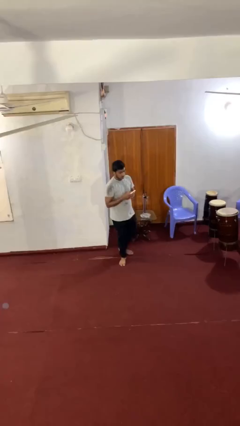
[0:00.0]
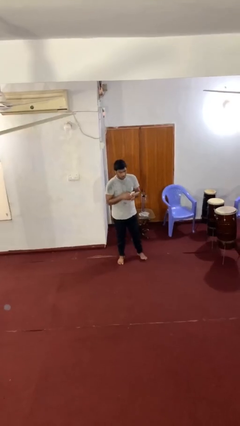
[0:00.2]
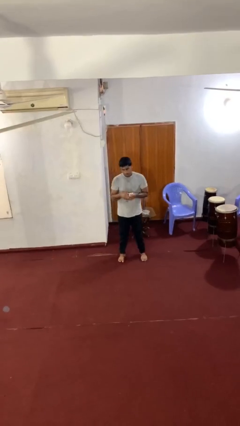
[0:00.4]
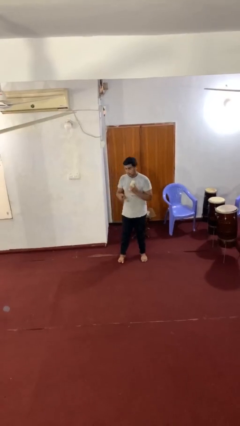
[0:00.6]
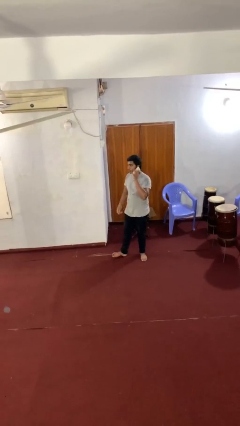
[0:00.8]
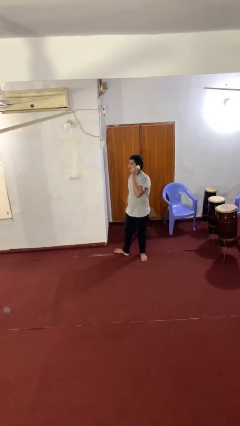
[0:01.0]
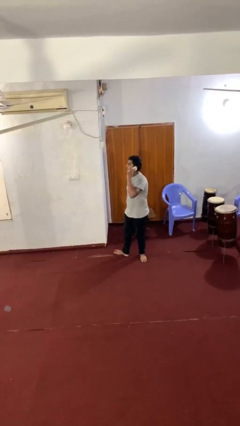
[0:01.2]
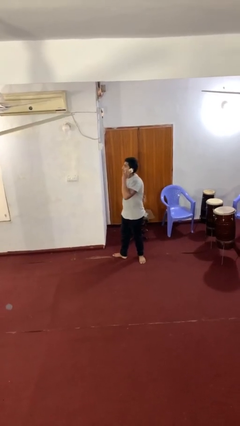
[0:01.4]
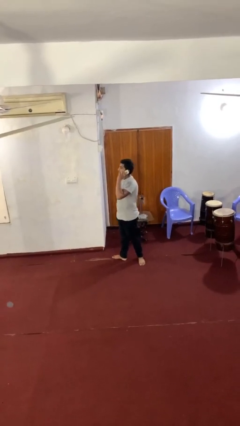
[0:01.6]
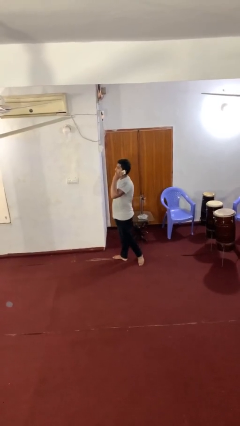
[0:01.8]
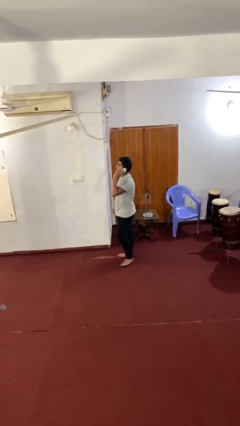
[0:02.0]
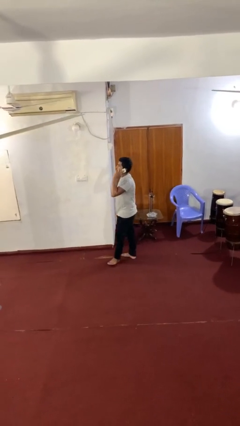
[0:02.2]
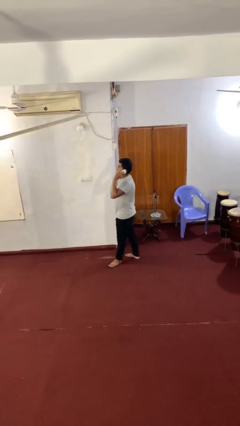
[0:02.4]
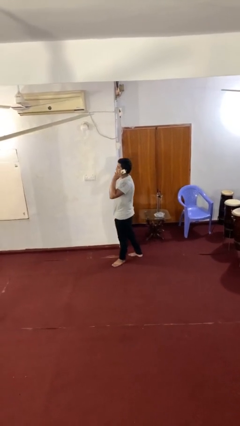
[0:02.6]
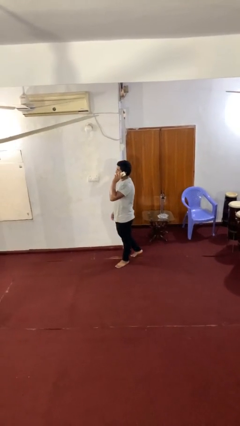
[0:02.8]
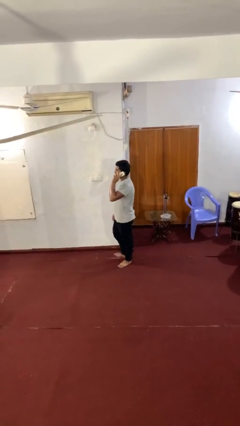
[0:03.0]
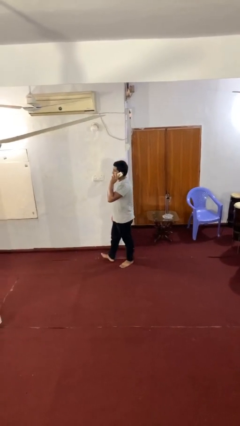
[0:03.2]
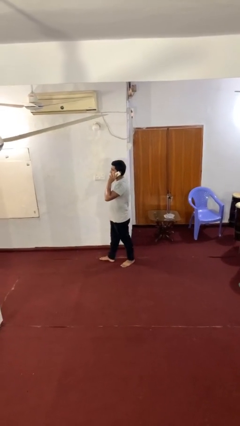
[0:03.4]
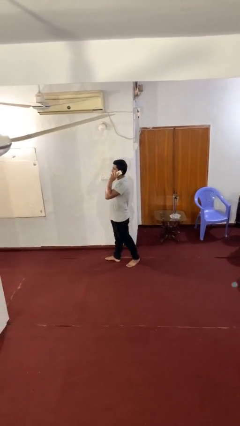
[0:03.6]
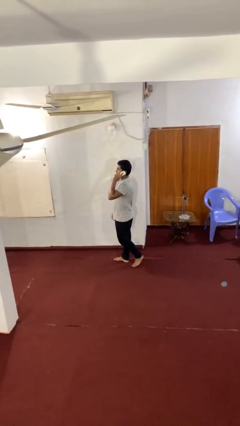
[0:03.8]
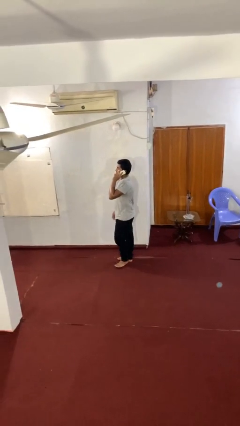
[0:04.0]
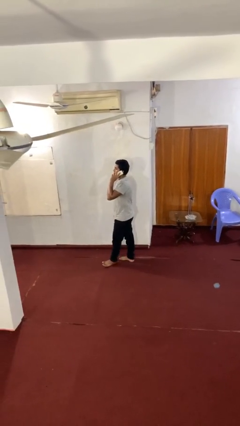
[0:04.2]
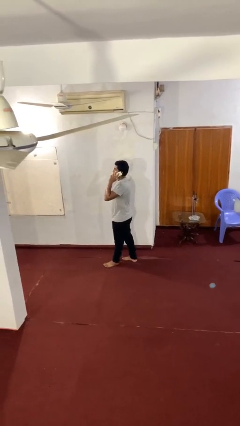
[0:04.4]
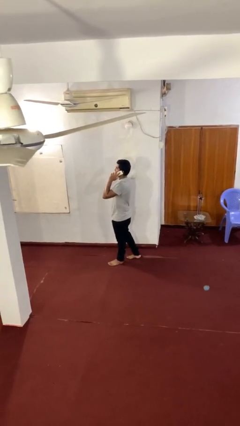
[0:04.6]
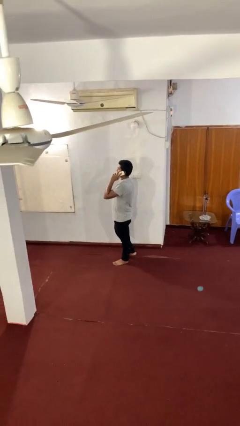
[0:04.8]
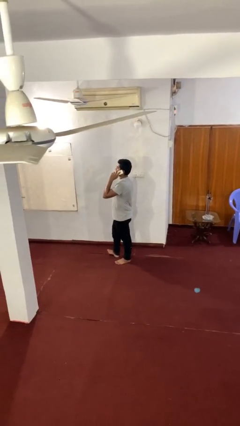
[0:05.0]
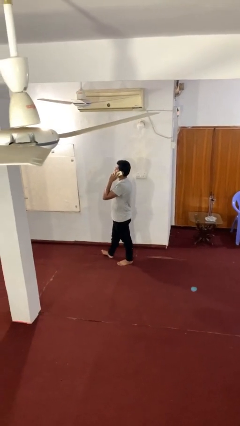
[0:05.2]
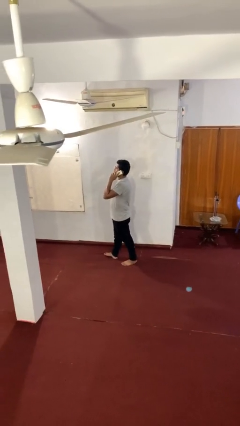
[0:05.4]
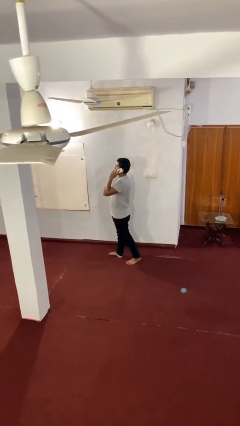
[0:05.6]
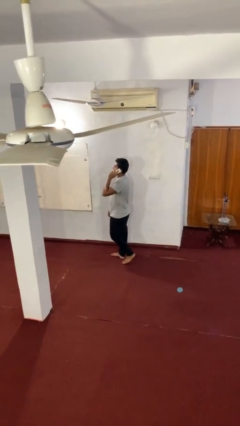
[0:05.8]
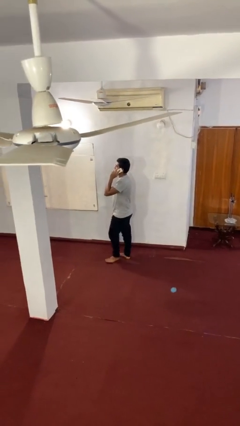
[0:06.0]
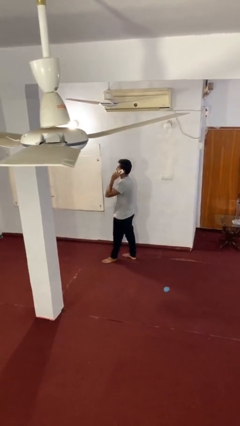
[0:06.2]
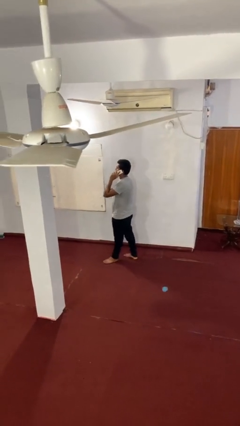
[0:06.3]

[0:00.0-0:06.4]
person talks on phone

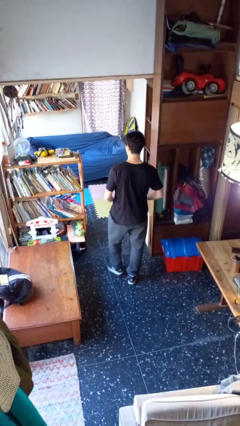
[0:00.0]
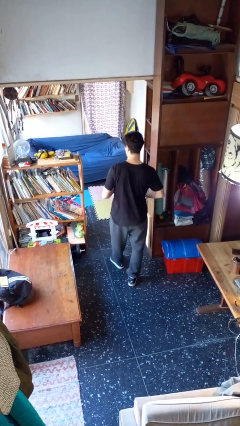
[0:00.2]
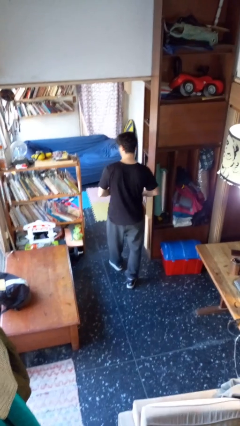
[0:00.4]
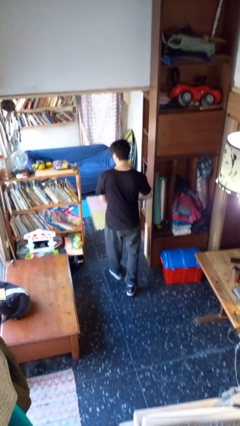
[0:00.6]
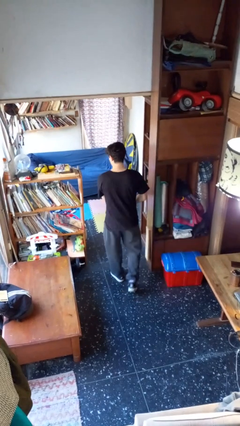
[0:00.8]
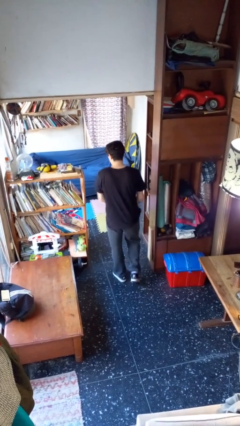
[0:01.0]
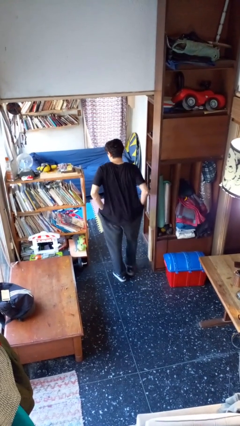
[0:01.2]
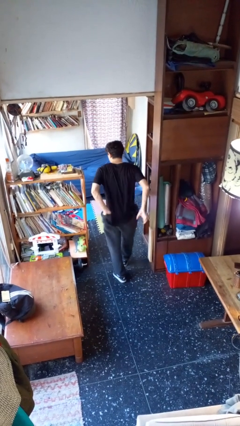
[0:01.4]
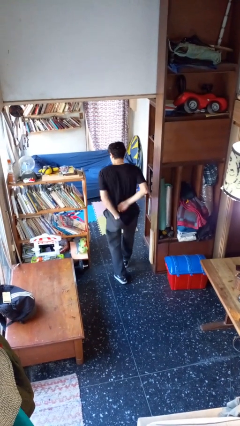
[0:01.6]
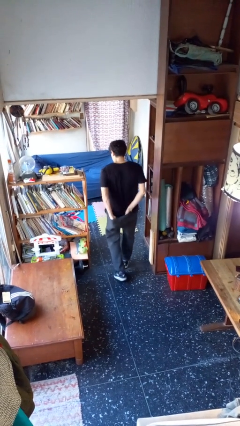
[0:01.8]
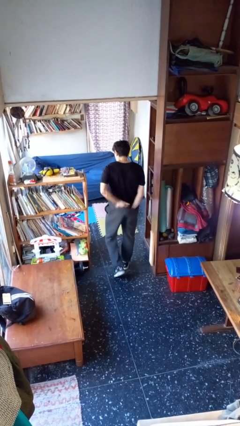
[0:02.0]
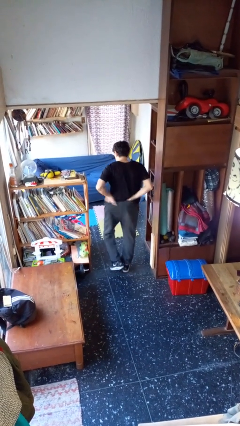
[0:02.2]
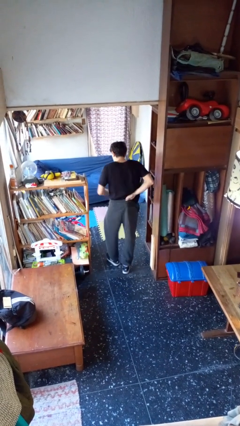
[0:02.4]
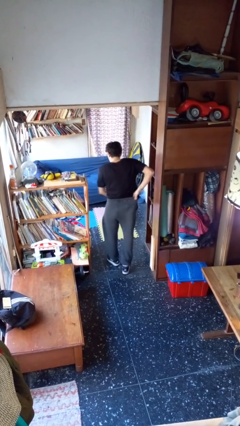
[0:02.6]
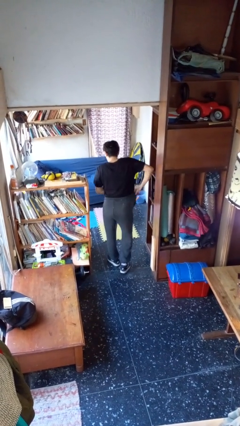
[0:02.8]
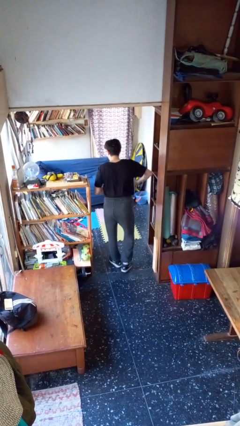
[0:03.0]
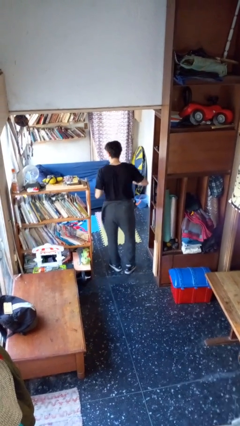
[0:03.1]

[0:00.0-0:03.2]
person tucks in shirt

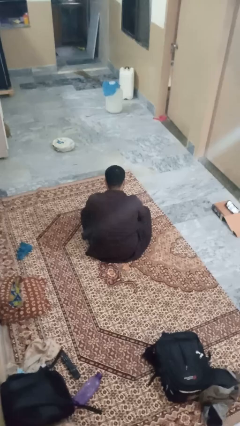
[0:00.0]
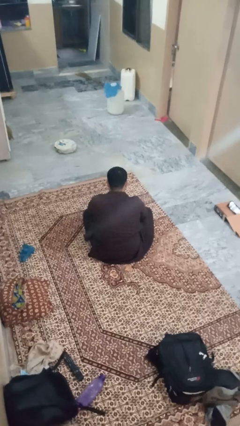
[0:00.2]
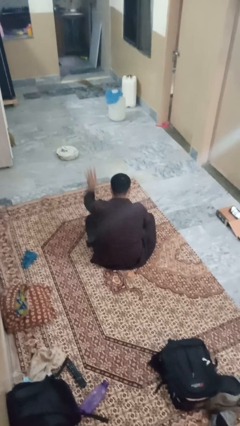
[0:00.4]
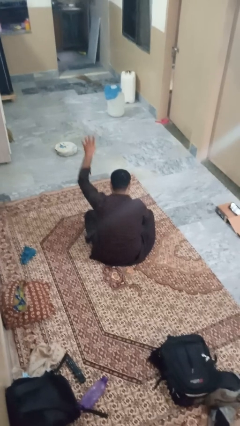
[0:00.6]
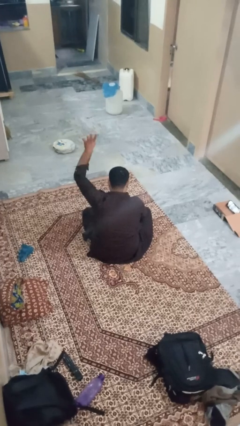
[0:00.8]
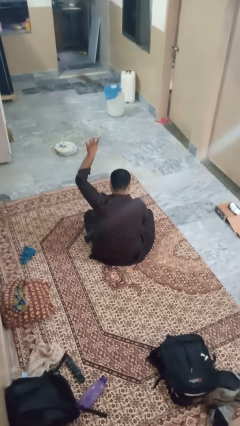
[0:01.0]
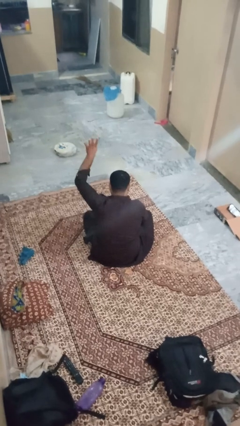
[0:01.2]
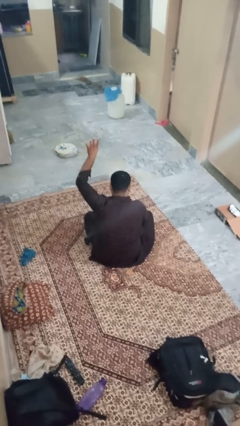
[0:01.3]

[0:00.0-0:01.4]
person gestures number four

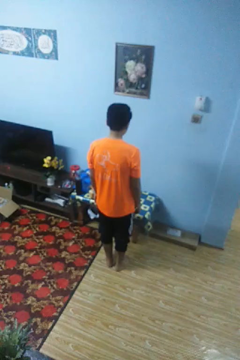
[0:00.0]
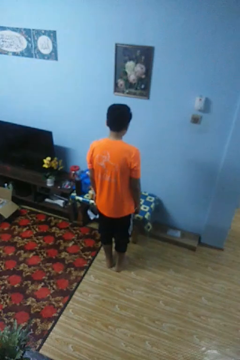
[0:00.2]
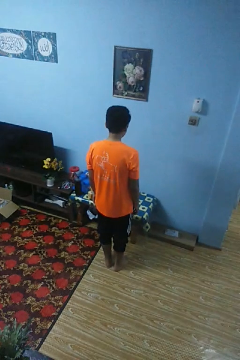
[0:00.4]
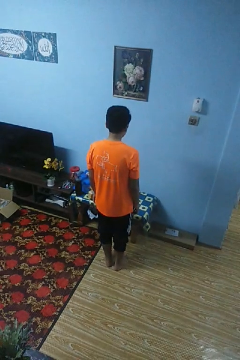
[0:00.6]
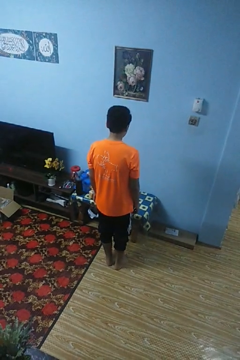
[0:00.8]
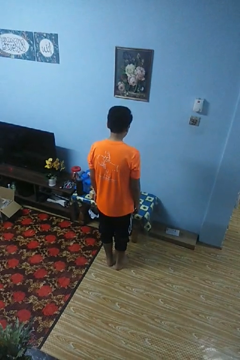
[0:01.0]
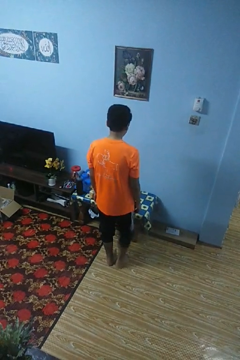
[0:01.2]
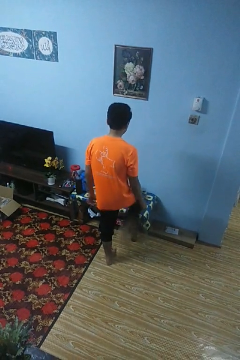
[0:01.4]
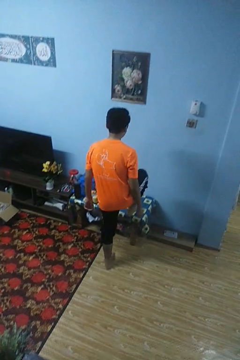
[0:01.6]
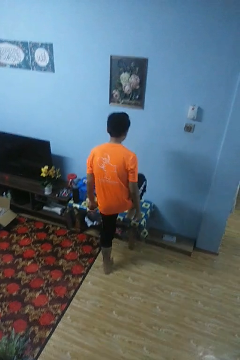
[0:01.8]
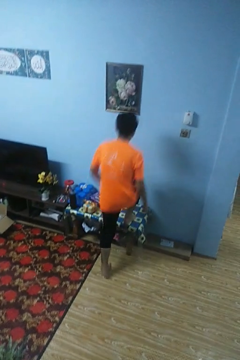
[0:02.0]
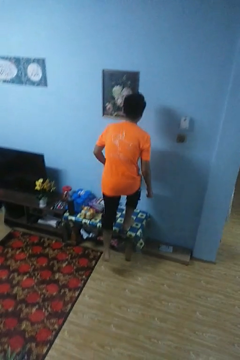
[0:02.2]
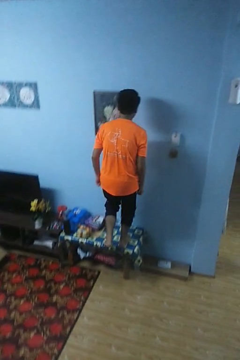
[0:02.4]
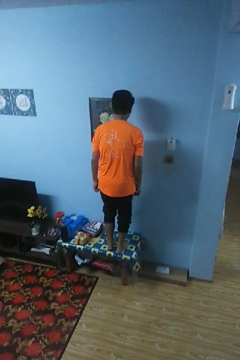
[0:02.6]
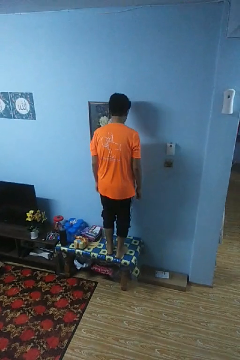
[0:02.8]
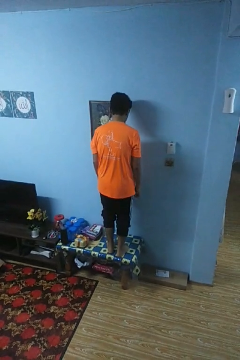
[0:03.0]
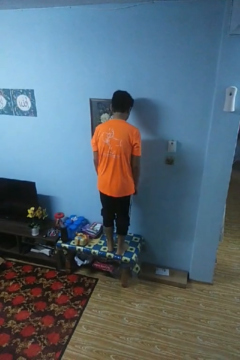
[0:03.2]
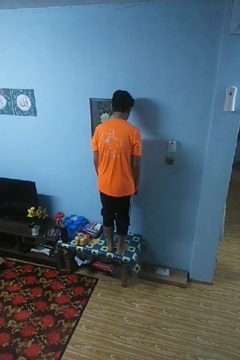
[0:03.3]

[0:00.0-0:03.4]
person climbs on table

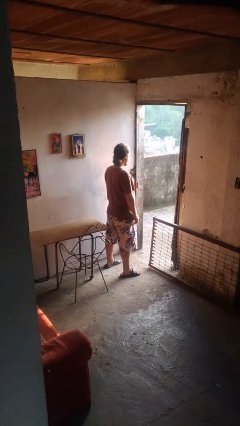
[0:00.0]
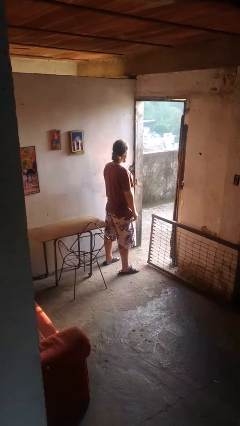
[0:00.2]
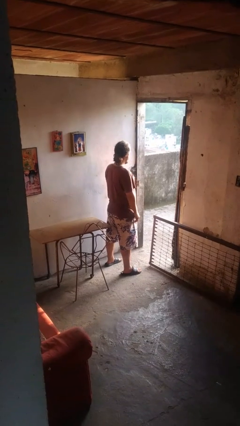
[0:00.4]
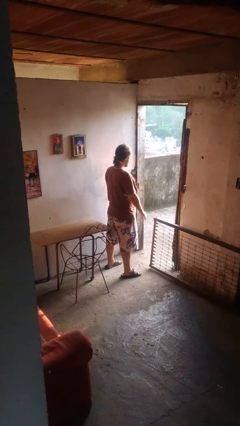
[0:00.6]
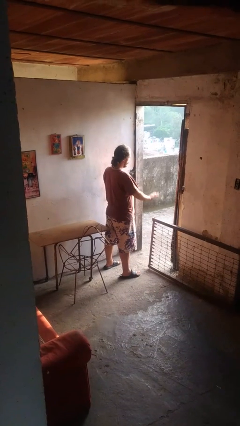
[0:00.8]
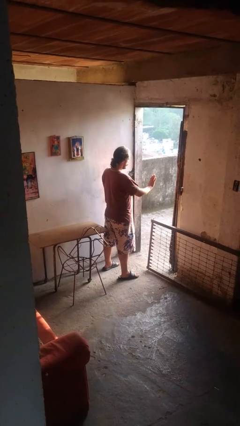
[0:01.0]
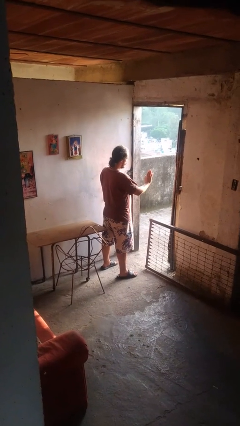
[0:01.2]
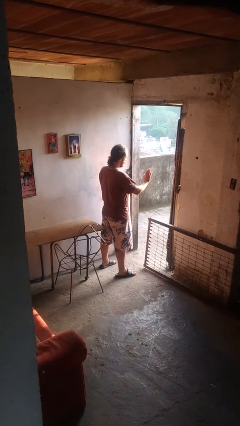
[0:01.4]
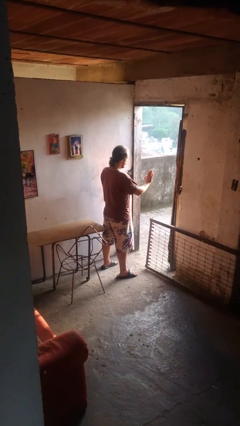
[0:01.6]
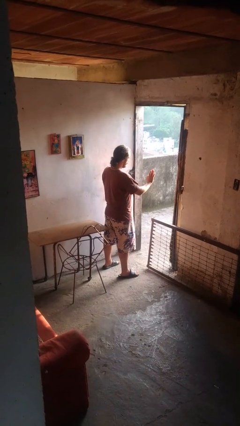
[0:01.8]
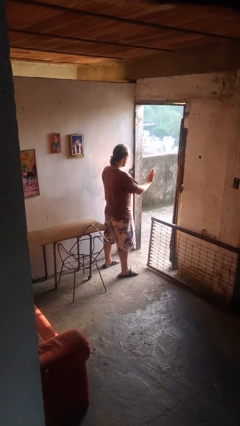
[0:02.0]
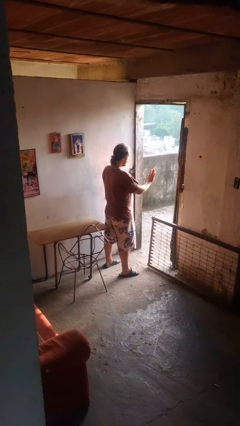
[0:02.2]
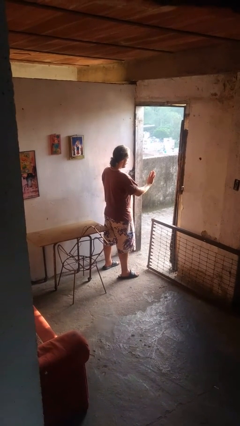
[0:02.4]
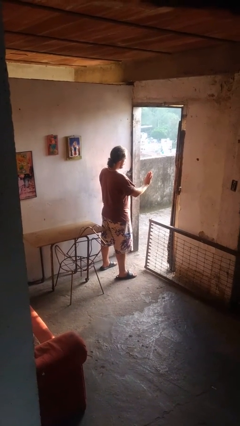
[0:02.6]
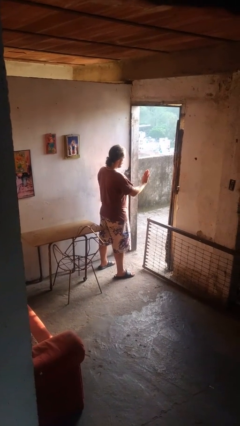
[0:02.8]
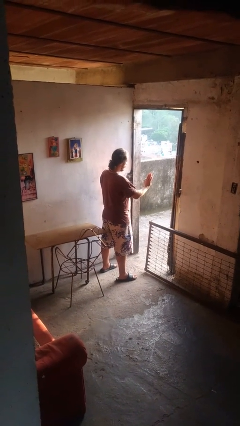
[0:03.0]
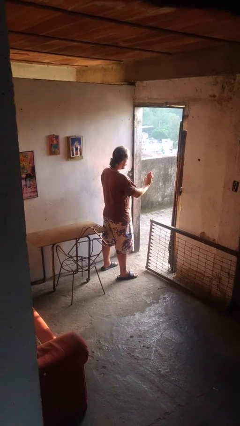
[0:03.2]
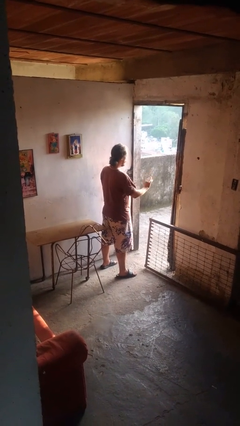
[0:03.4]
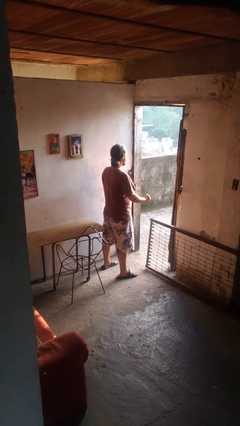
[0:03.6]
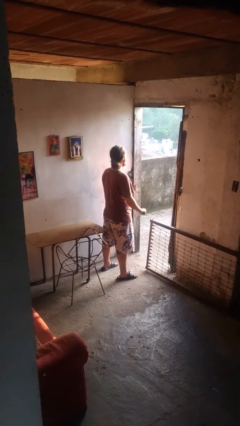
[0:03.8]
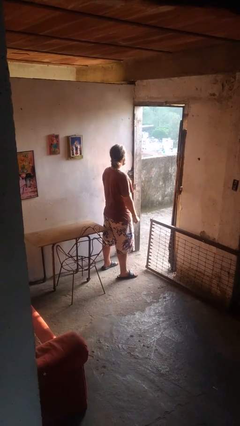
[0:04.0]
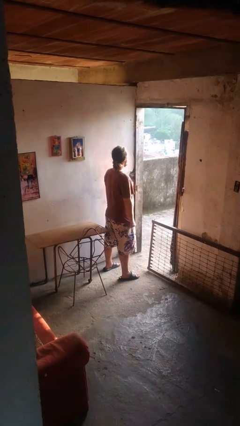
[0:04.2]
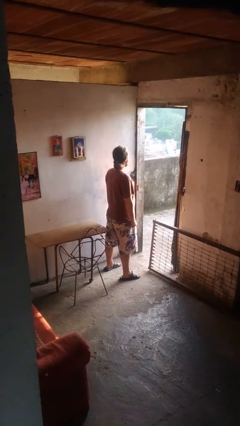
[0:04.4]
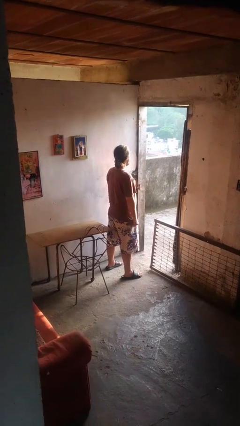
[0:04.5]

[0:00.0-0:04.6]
person gestures stop
